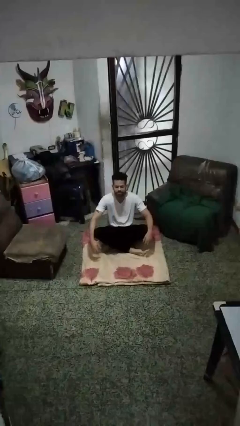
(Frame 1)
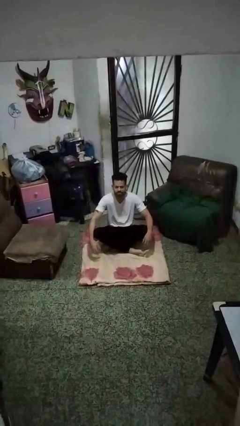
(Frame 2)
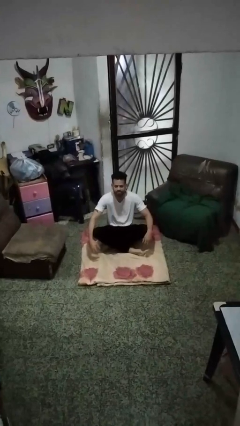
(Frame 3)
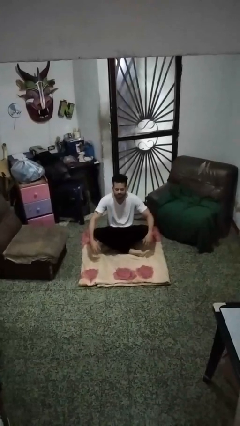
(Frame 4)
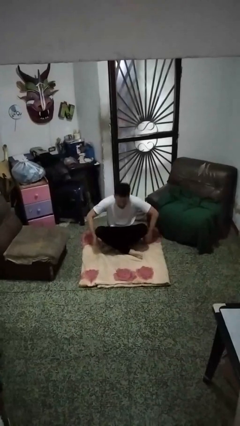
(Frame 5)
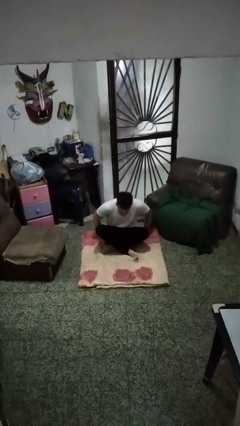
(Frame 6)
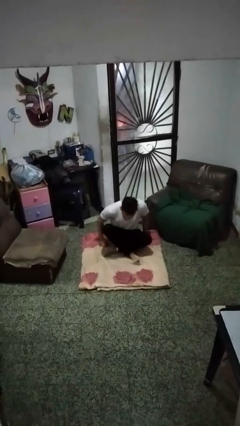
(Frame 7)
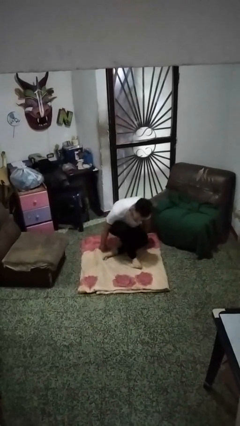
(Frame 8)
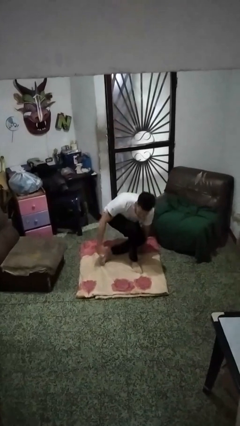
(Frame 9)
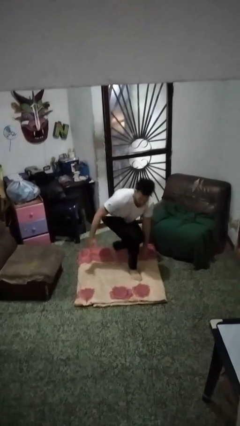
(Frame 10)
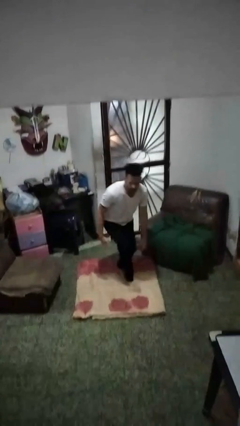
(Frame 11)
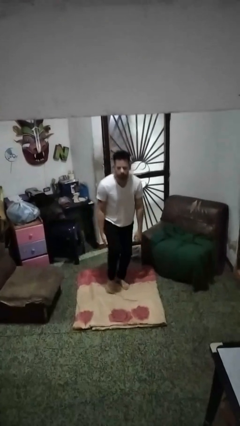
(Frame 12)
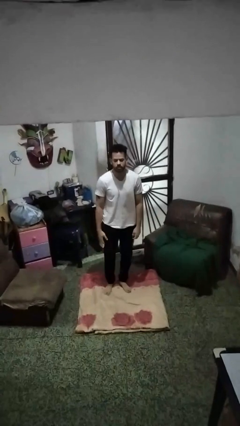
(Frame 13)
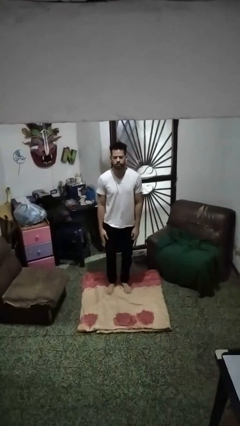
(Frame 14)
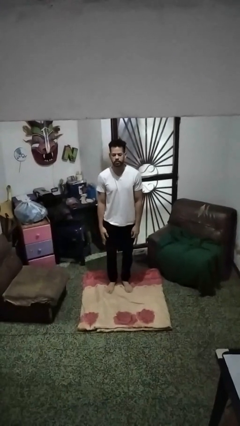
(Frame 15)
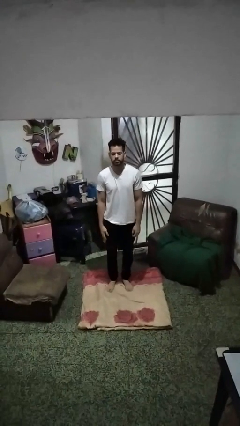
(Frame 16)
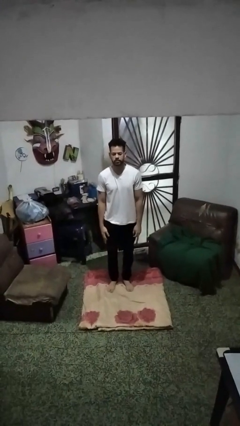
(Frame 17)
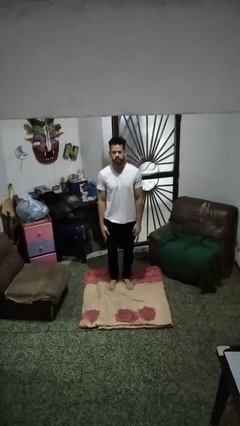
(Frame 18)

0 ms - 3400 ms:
person stands up from floor

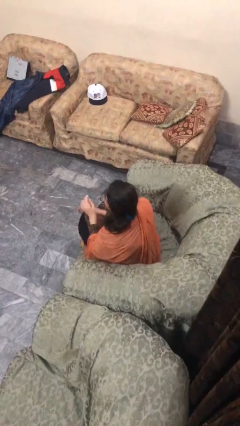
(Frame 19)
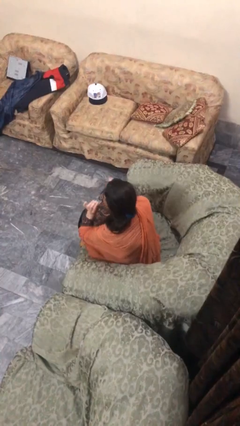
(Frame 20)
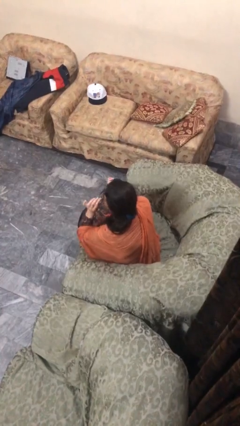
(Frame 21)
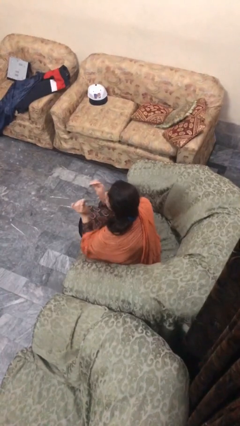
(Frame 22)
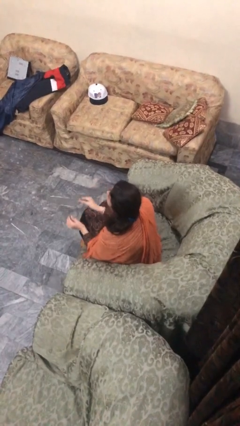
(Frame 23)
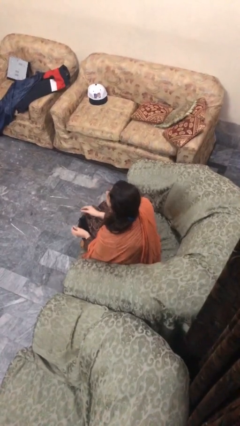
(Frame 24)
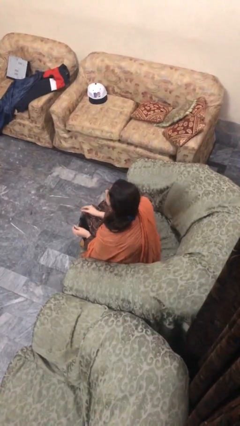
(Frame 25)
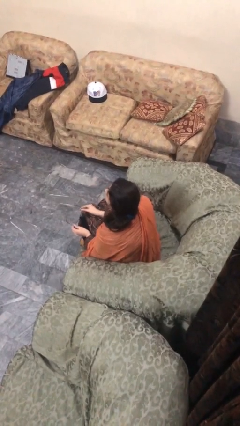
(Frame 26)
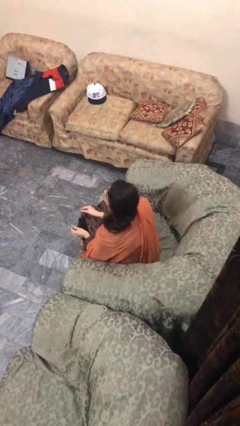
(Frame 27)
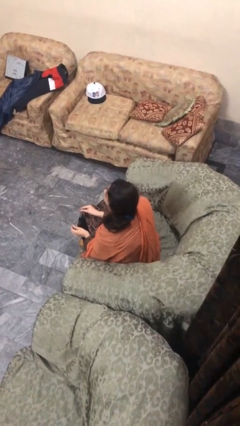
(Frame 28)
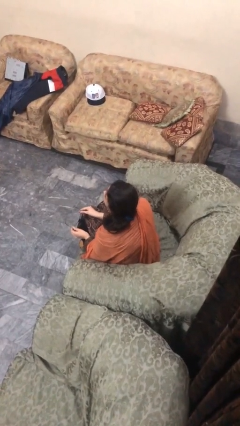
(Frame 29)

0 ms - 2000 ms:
person takes off glasses

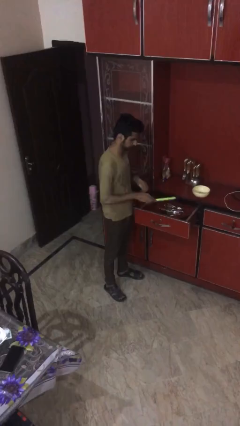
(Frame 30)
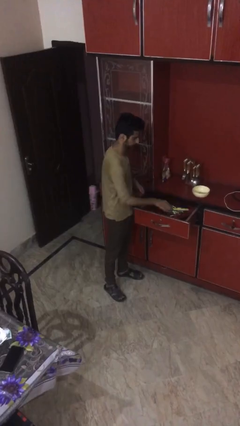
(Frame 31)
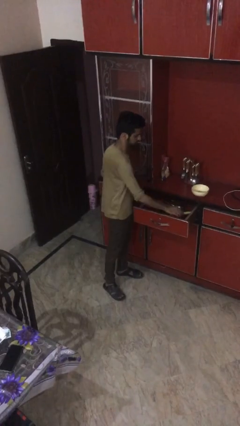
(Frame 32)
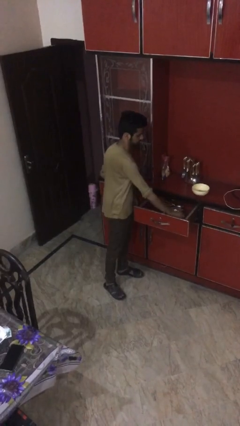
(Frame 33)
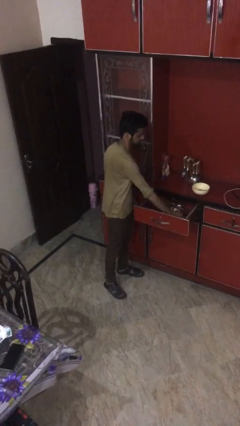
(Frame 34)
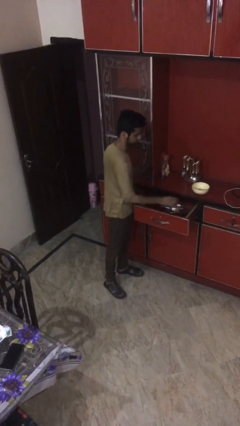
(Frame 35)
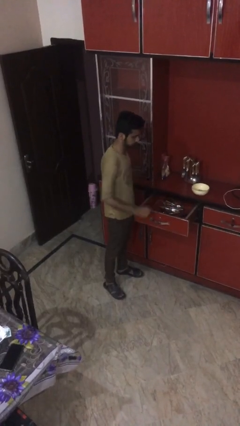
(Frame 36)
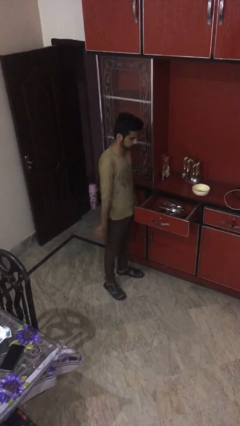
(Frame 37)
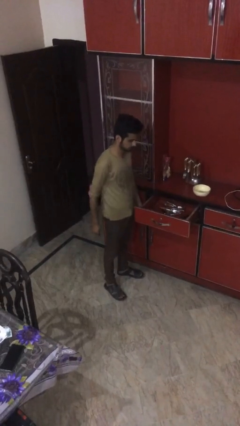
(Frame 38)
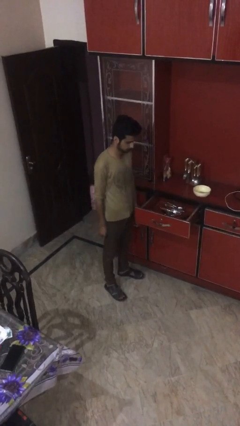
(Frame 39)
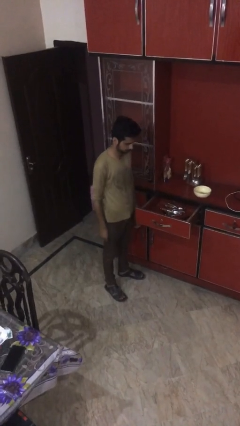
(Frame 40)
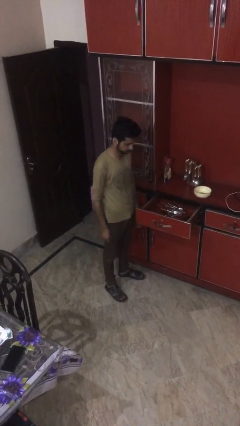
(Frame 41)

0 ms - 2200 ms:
person puts object into kitchen drawer

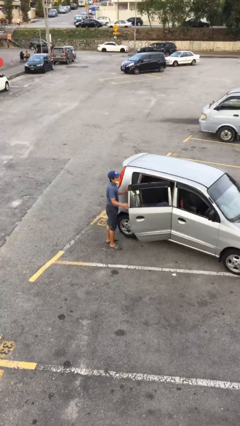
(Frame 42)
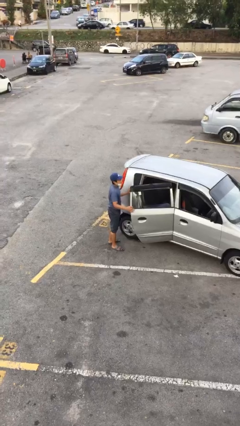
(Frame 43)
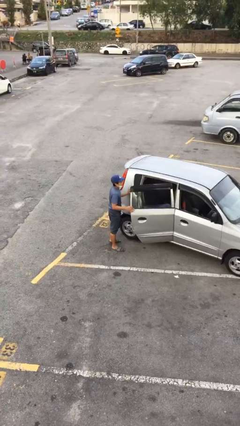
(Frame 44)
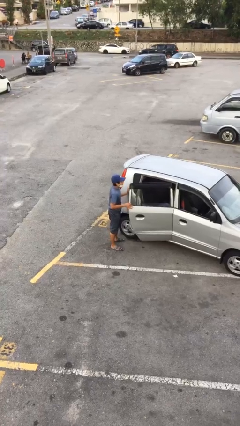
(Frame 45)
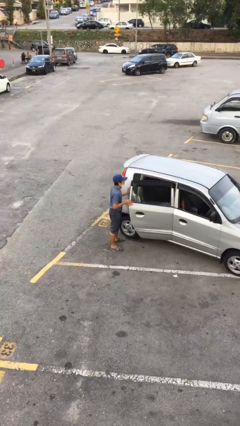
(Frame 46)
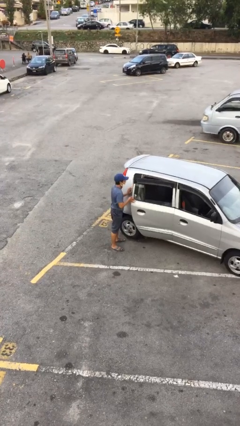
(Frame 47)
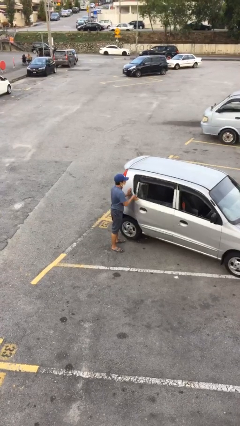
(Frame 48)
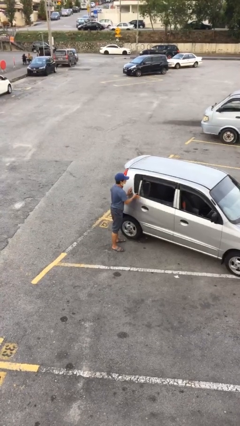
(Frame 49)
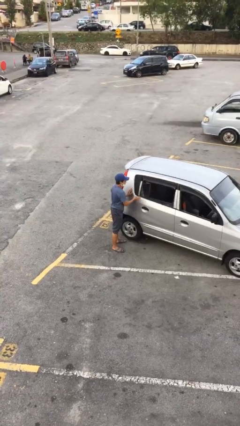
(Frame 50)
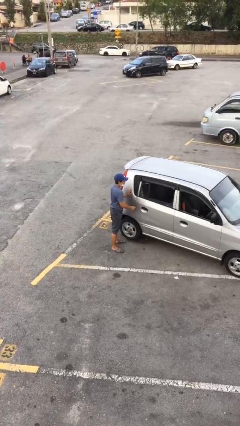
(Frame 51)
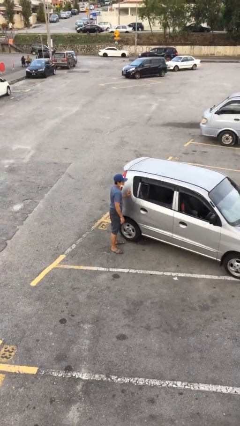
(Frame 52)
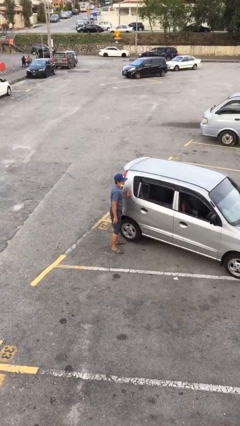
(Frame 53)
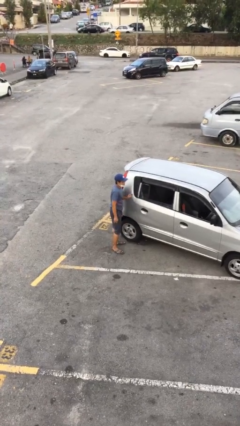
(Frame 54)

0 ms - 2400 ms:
person closes car door

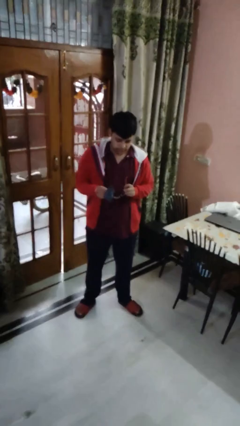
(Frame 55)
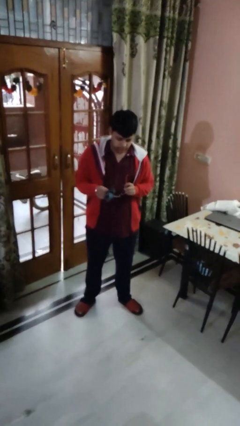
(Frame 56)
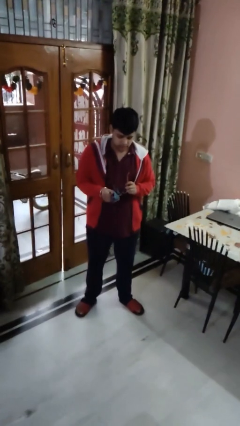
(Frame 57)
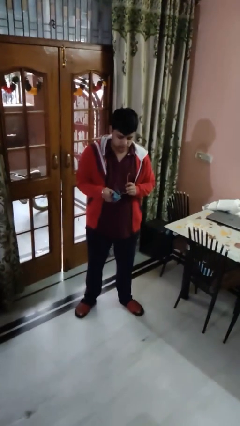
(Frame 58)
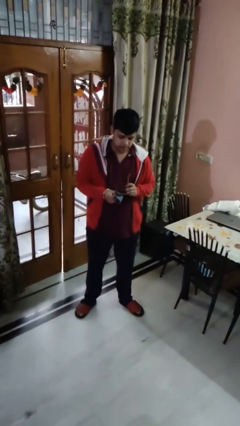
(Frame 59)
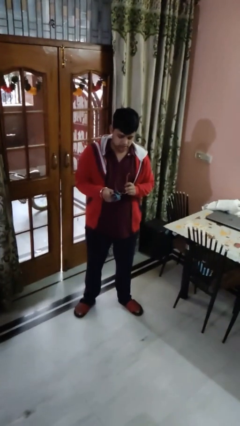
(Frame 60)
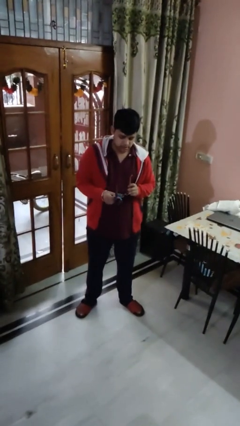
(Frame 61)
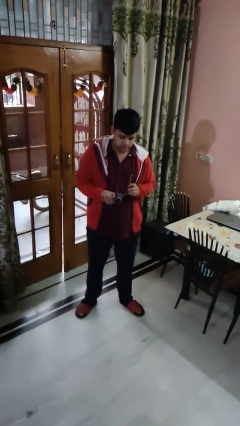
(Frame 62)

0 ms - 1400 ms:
person cleans eyeglasses

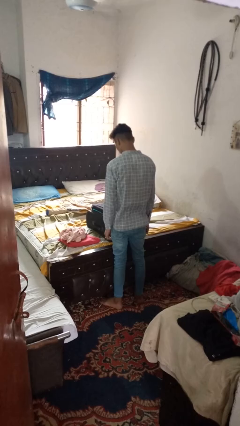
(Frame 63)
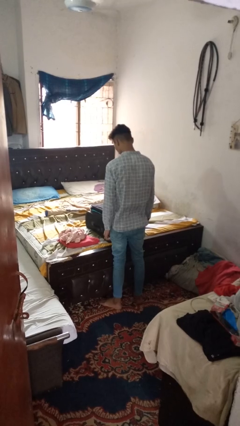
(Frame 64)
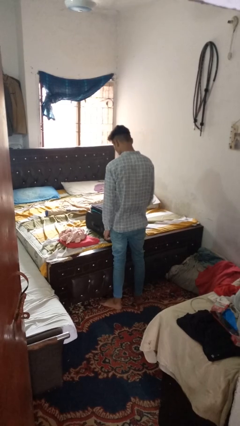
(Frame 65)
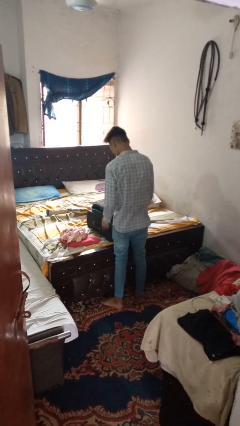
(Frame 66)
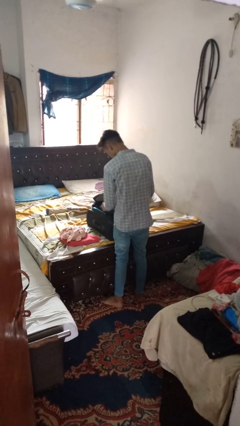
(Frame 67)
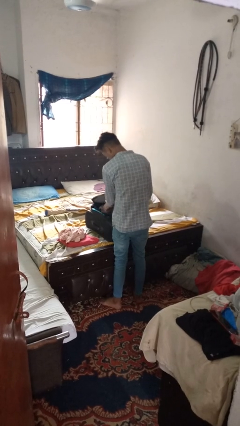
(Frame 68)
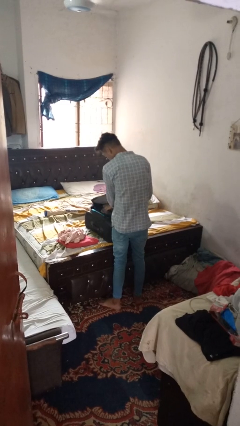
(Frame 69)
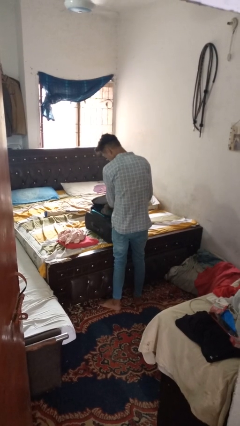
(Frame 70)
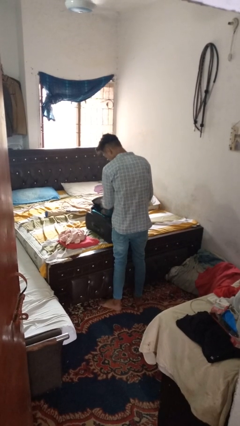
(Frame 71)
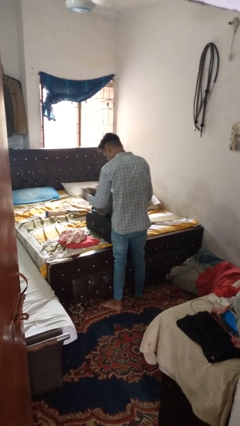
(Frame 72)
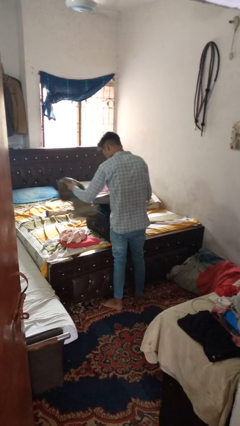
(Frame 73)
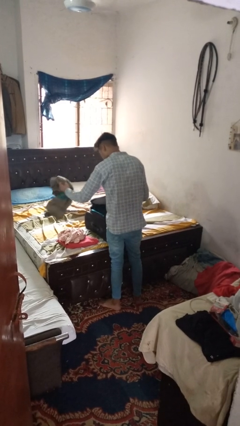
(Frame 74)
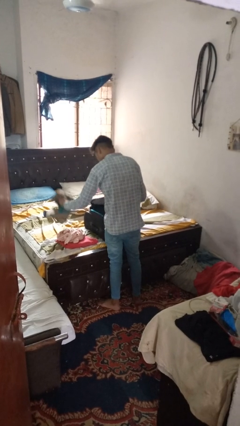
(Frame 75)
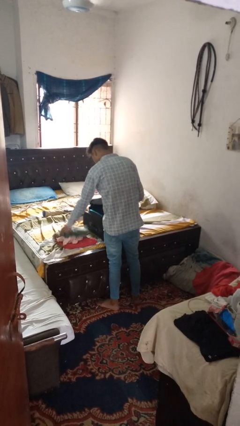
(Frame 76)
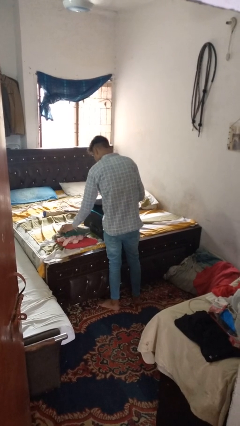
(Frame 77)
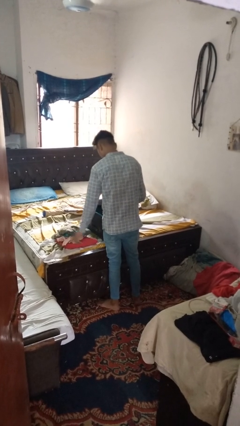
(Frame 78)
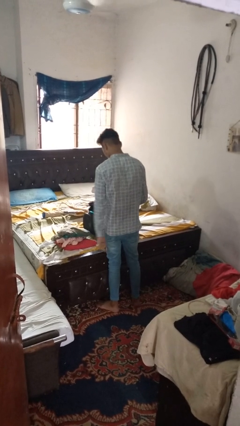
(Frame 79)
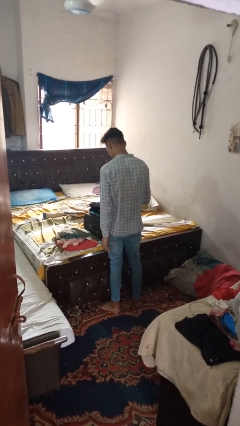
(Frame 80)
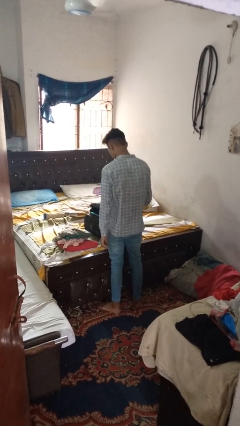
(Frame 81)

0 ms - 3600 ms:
person unloads clothes from suitcase

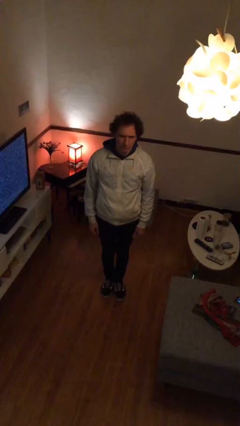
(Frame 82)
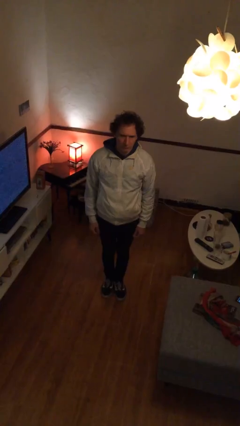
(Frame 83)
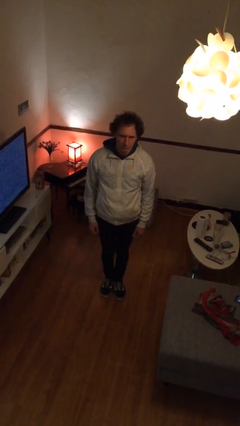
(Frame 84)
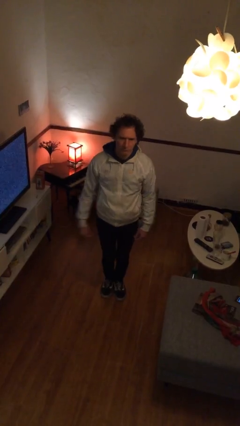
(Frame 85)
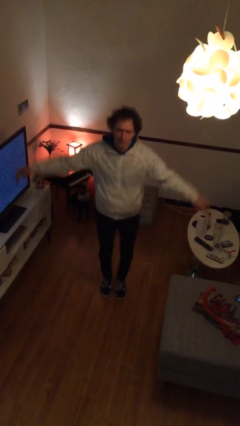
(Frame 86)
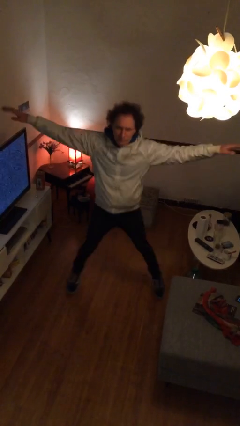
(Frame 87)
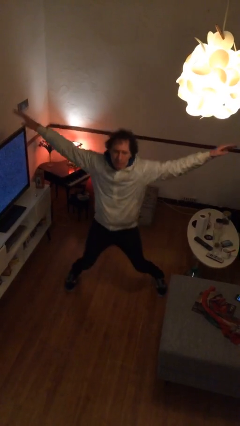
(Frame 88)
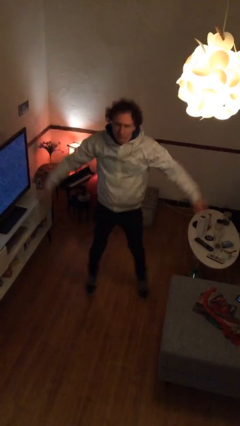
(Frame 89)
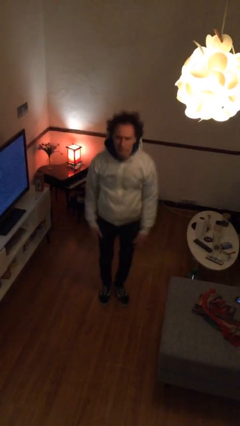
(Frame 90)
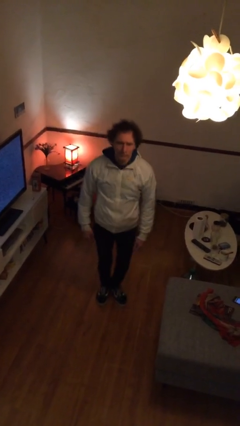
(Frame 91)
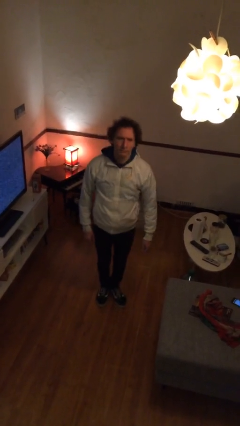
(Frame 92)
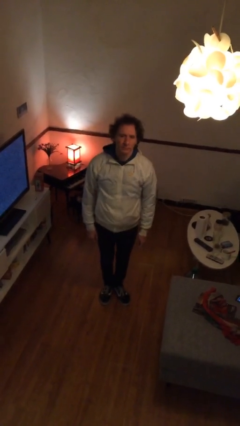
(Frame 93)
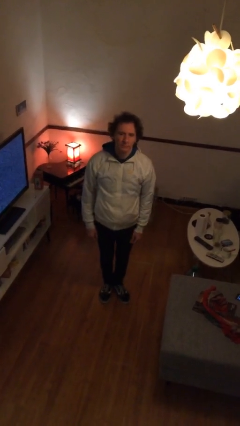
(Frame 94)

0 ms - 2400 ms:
person exercises with jumping jacks
